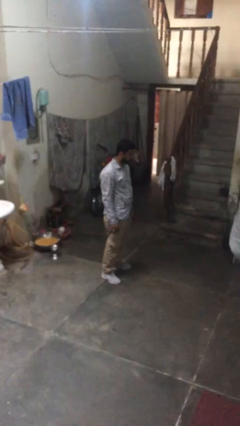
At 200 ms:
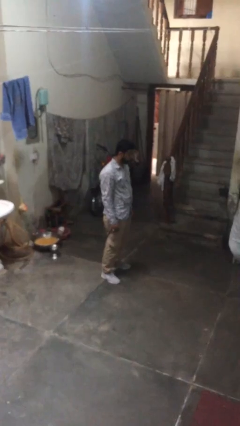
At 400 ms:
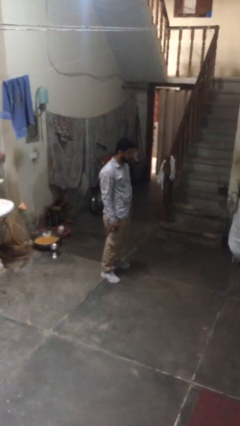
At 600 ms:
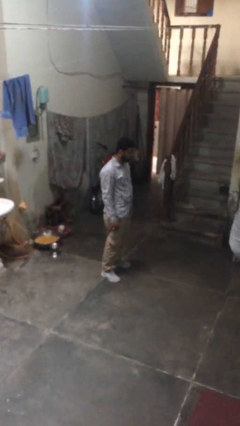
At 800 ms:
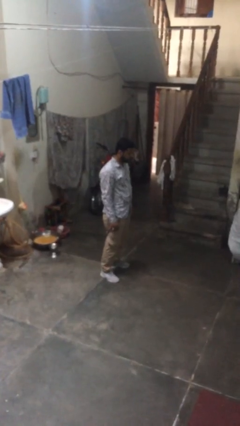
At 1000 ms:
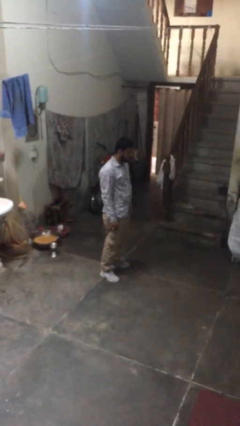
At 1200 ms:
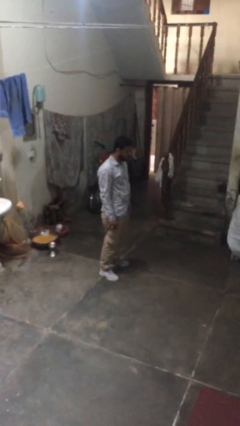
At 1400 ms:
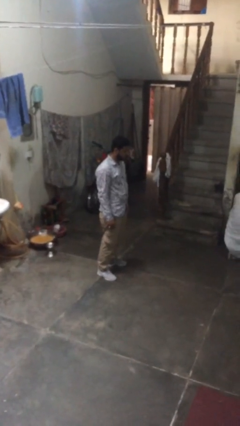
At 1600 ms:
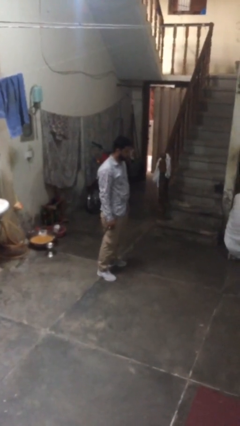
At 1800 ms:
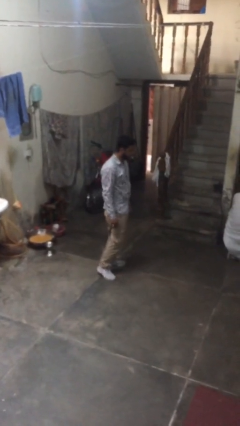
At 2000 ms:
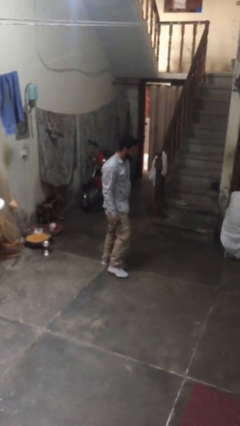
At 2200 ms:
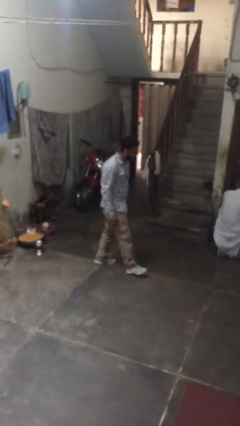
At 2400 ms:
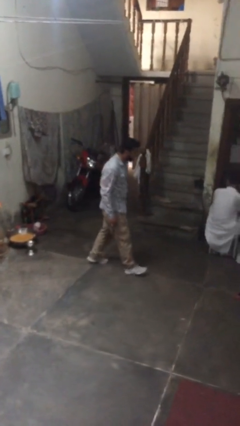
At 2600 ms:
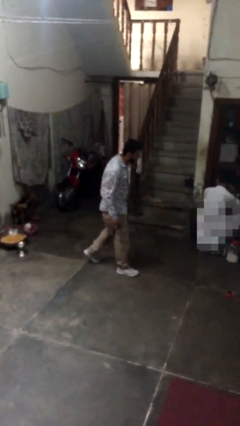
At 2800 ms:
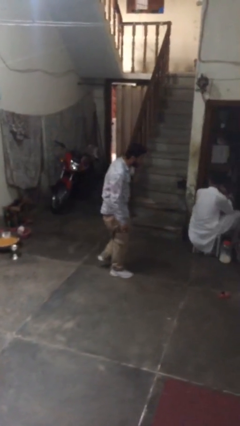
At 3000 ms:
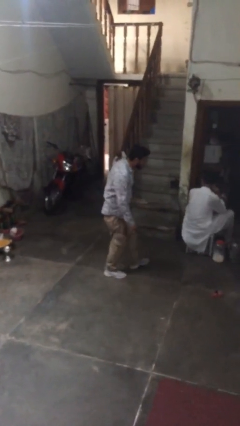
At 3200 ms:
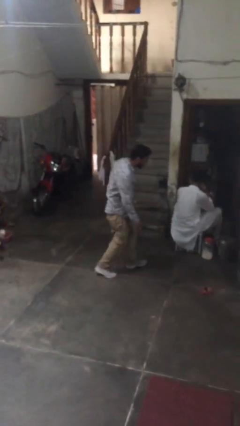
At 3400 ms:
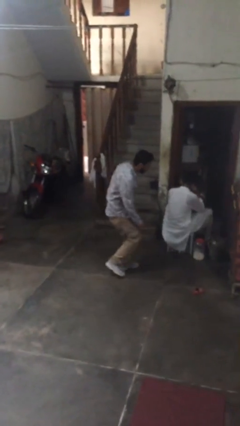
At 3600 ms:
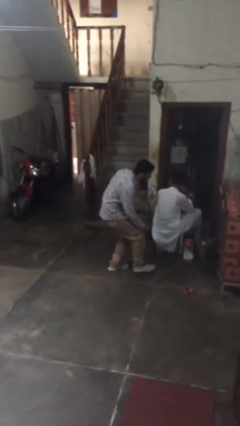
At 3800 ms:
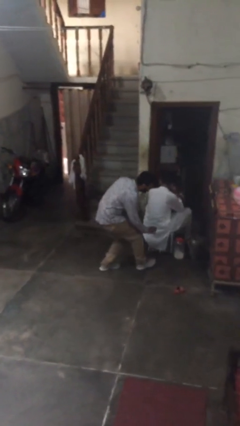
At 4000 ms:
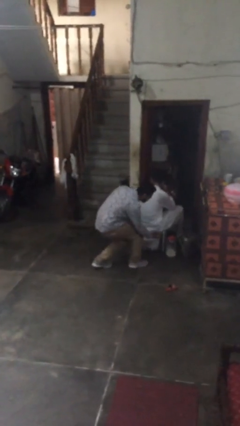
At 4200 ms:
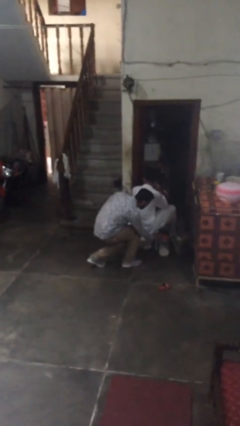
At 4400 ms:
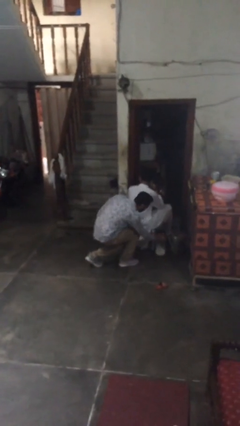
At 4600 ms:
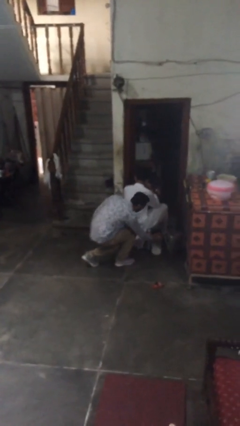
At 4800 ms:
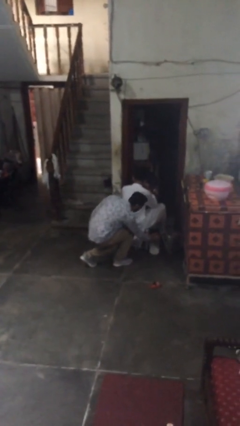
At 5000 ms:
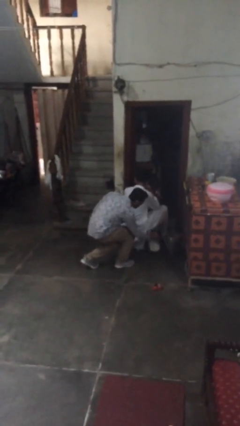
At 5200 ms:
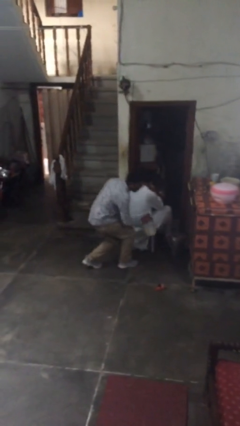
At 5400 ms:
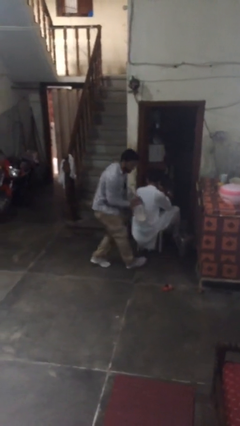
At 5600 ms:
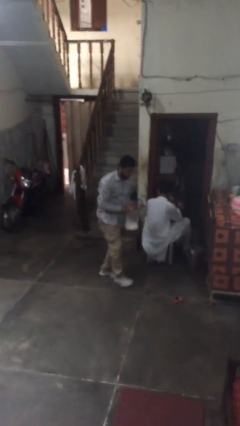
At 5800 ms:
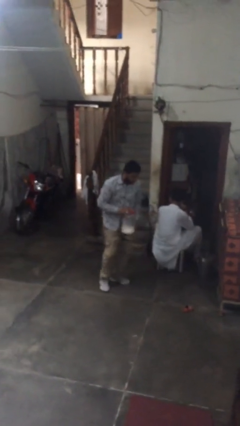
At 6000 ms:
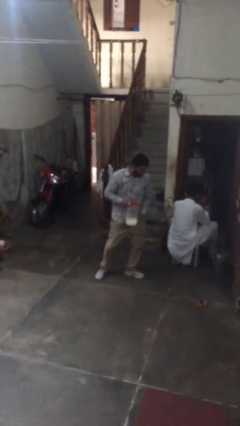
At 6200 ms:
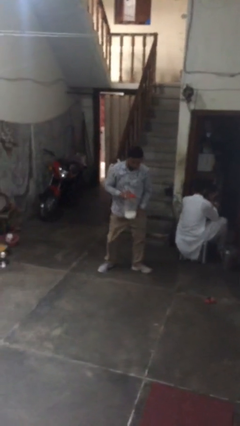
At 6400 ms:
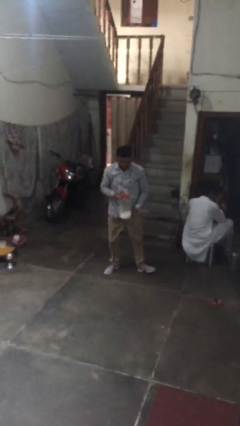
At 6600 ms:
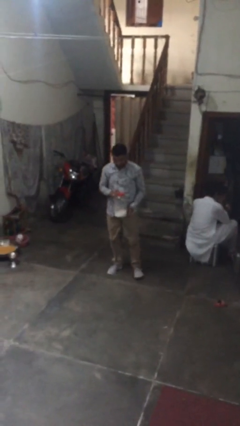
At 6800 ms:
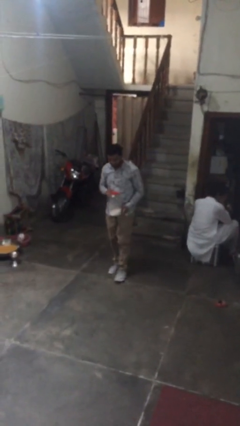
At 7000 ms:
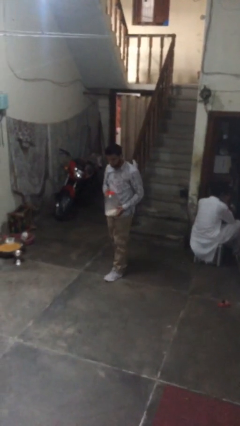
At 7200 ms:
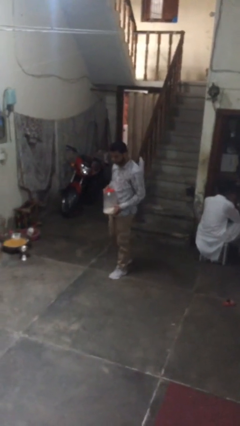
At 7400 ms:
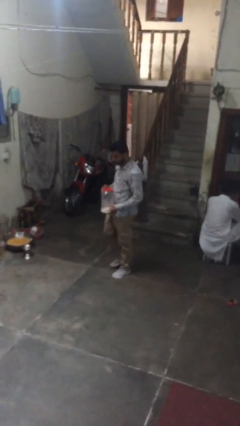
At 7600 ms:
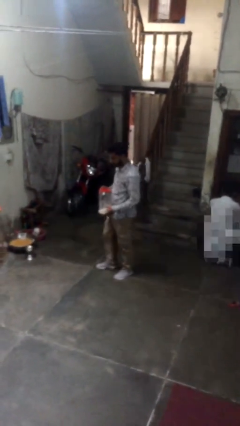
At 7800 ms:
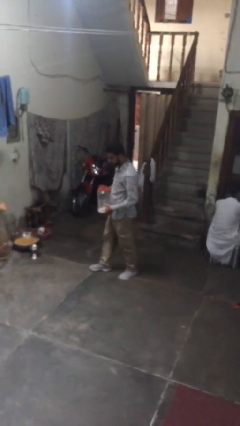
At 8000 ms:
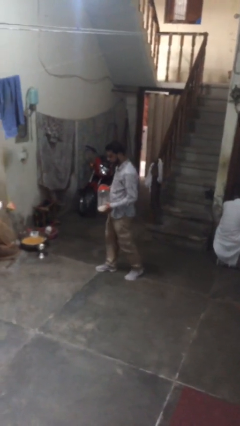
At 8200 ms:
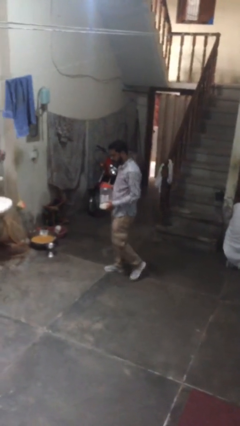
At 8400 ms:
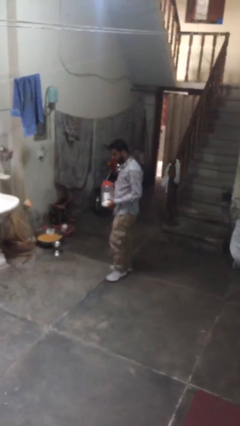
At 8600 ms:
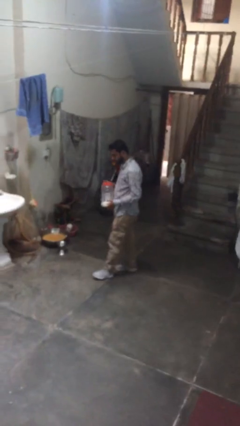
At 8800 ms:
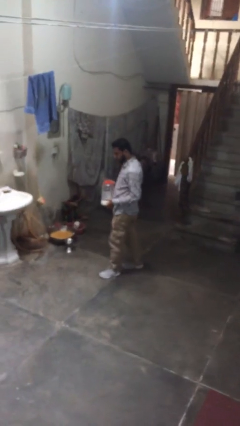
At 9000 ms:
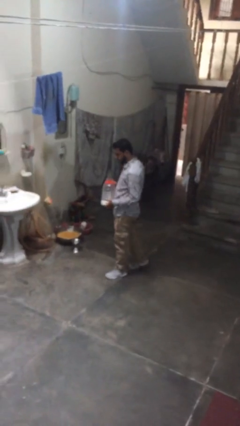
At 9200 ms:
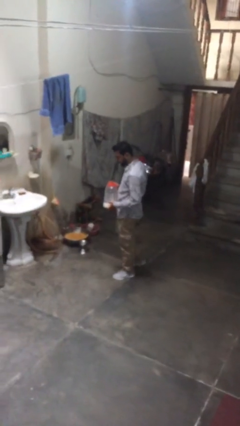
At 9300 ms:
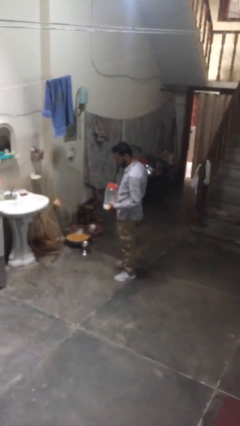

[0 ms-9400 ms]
person steals object from person

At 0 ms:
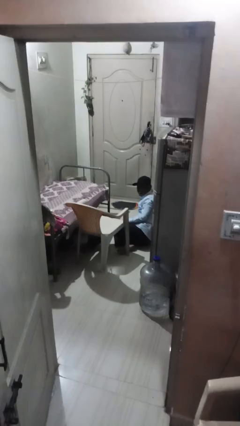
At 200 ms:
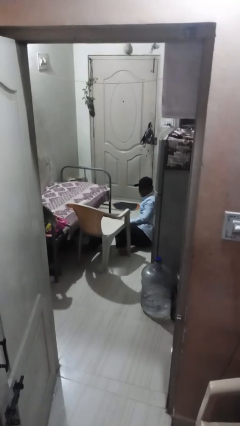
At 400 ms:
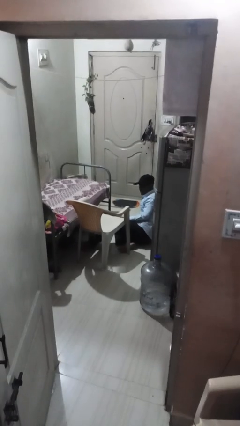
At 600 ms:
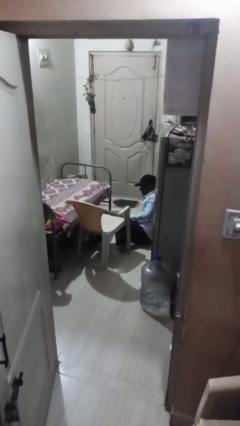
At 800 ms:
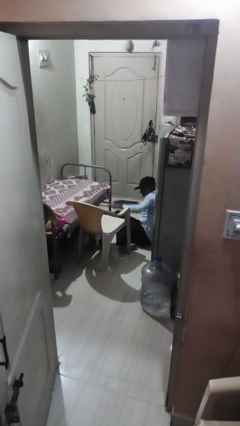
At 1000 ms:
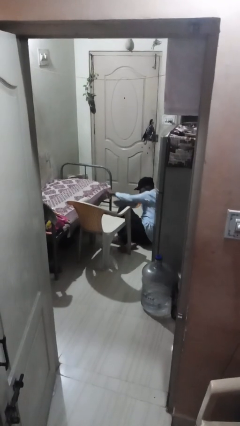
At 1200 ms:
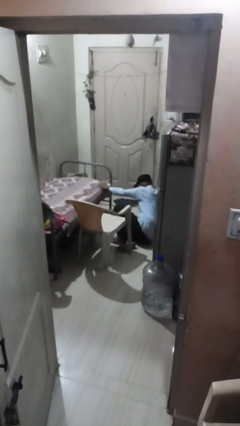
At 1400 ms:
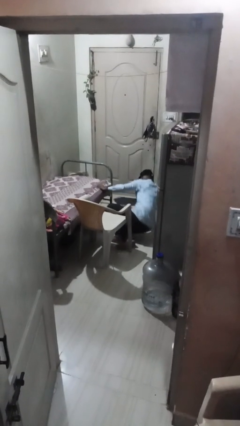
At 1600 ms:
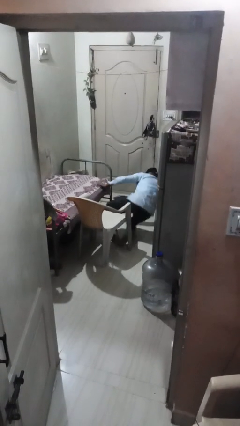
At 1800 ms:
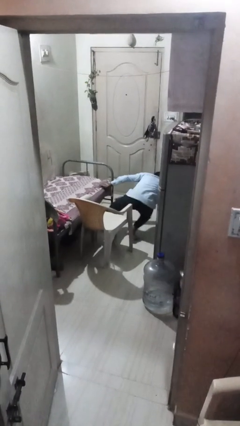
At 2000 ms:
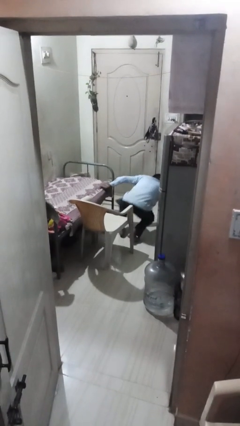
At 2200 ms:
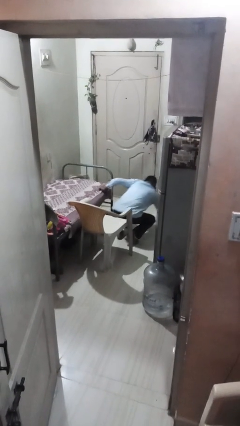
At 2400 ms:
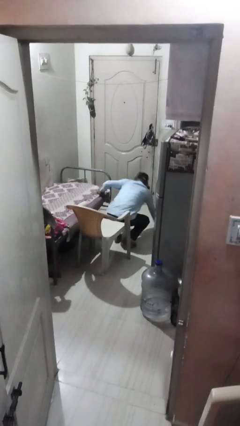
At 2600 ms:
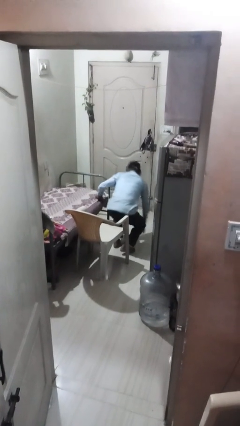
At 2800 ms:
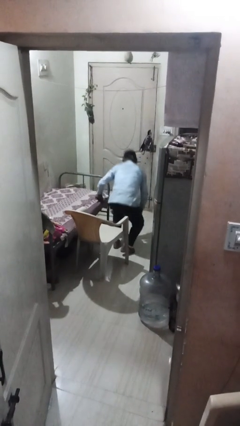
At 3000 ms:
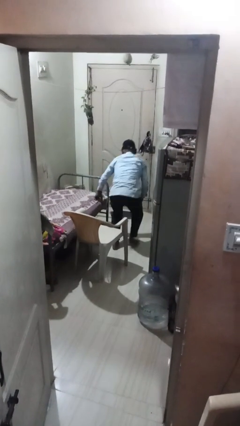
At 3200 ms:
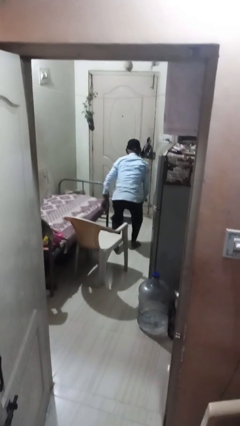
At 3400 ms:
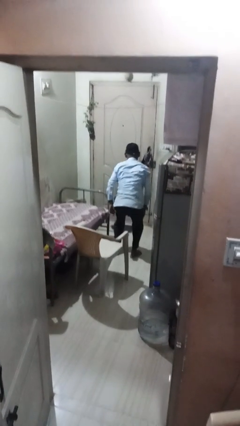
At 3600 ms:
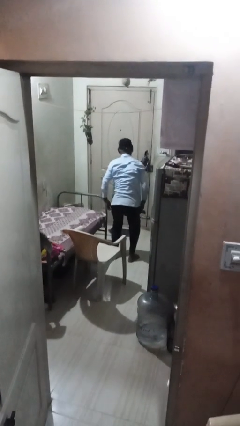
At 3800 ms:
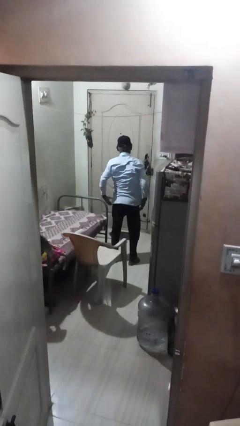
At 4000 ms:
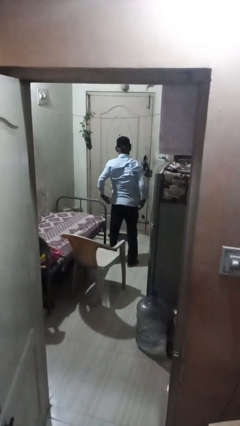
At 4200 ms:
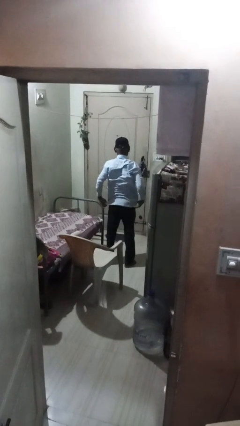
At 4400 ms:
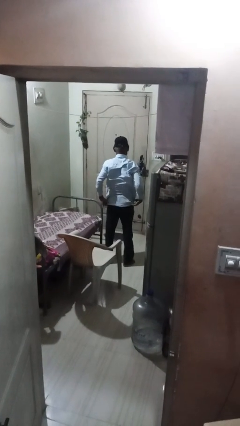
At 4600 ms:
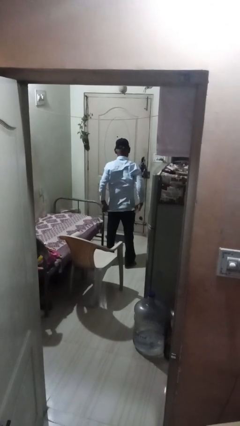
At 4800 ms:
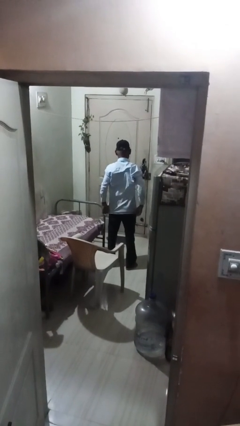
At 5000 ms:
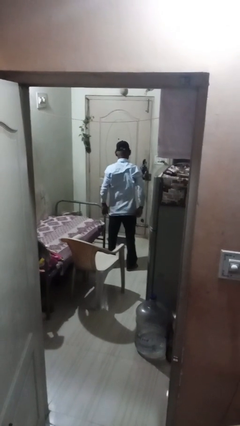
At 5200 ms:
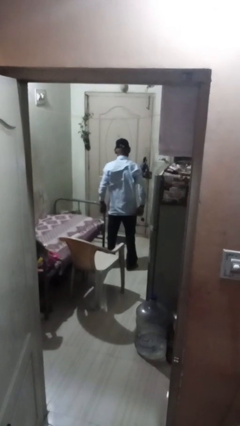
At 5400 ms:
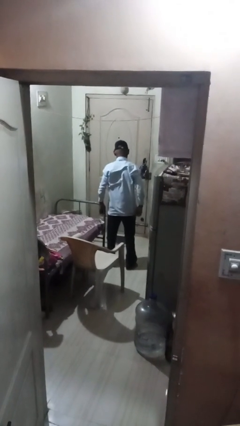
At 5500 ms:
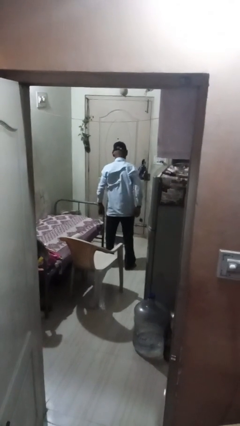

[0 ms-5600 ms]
person stands up from floor

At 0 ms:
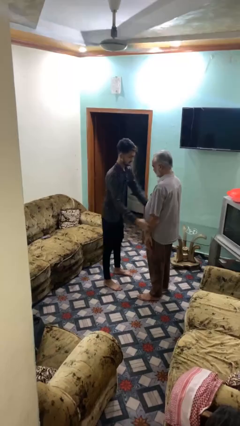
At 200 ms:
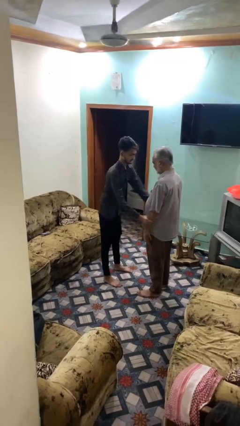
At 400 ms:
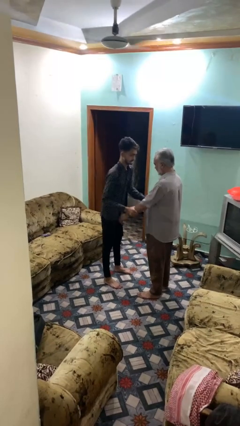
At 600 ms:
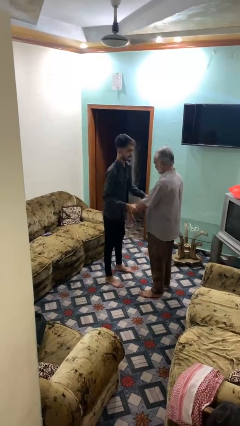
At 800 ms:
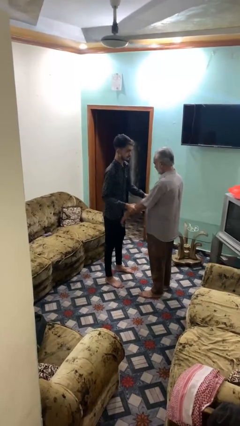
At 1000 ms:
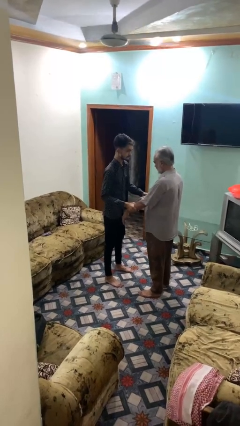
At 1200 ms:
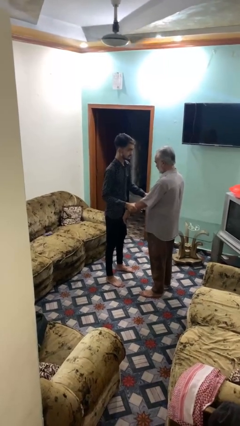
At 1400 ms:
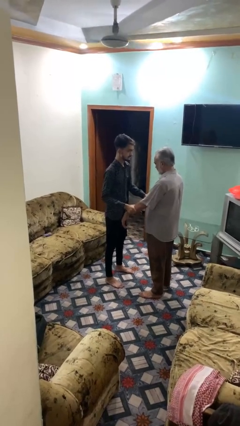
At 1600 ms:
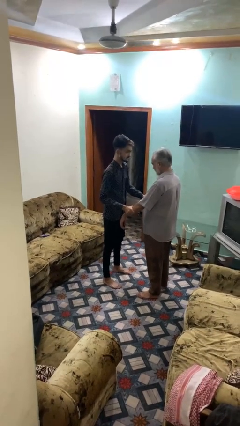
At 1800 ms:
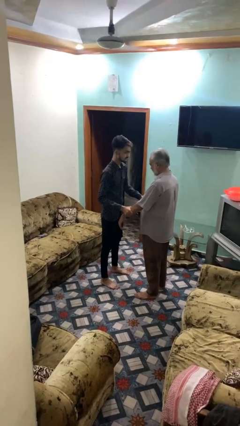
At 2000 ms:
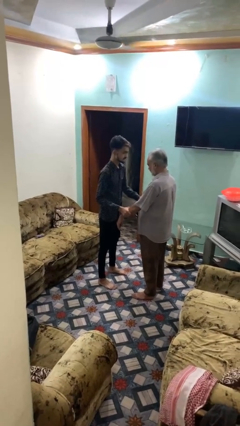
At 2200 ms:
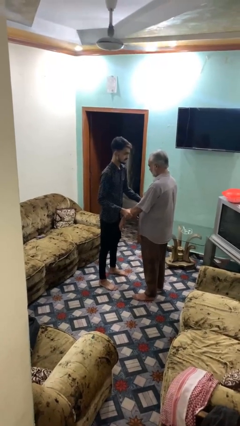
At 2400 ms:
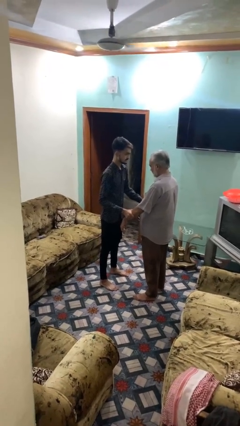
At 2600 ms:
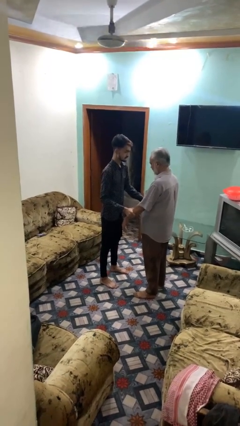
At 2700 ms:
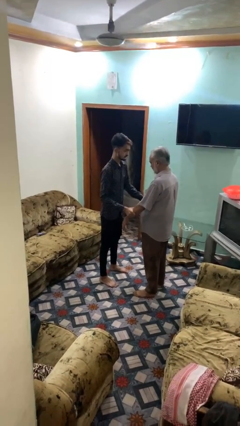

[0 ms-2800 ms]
person grabs person by forearm
